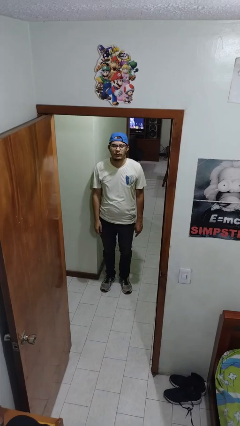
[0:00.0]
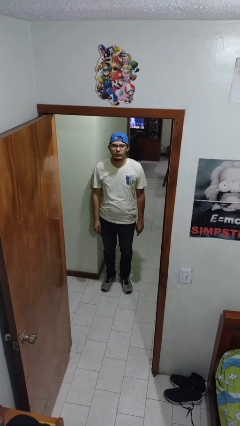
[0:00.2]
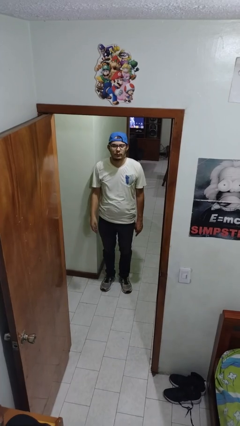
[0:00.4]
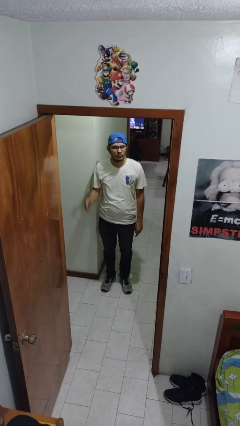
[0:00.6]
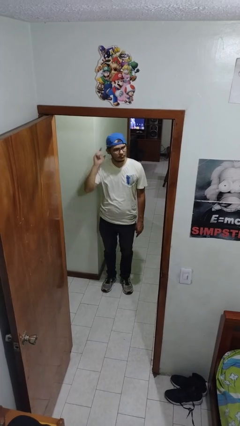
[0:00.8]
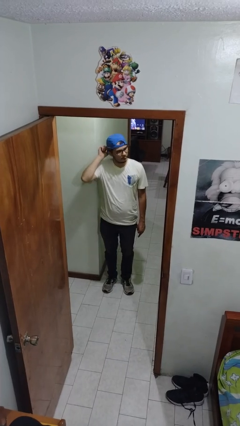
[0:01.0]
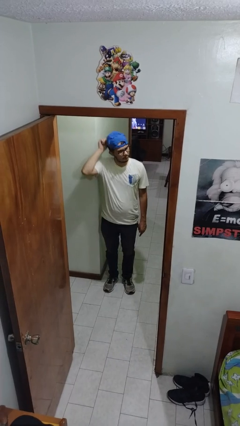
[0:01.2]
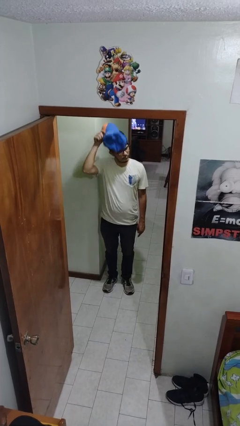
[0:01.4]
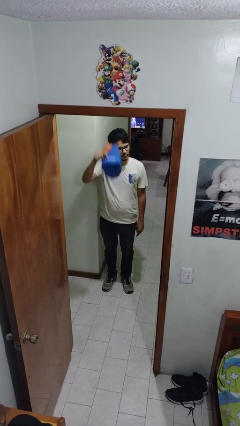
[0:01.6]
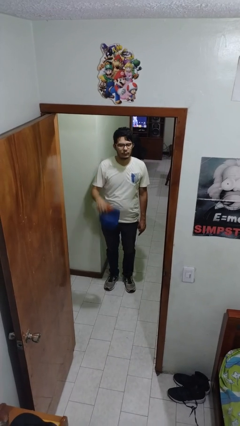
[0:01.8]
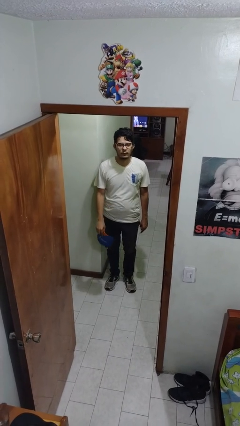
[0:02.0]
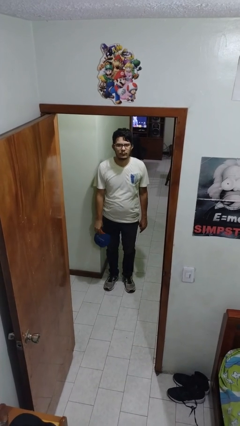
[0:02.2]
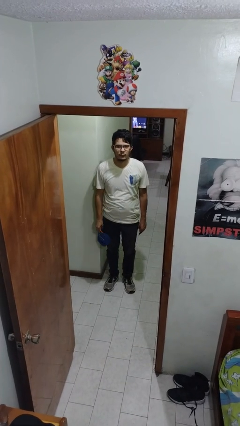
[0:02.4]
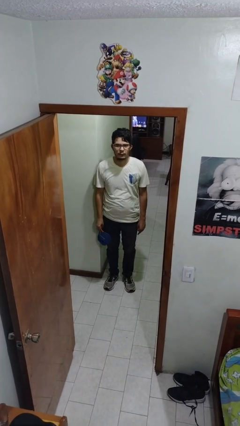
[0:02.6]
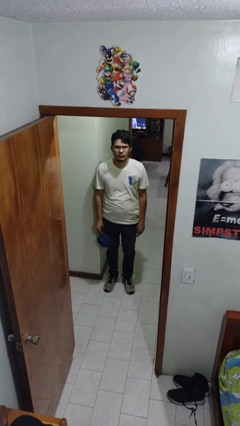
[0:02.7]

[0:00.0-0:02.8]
person takes off hat

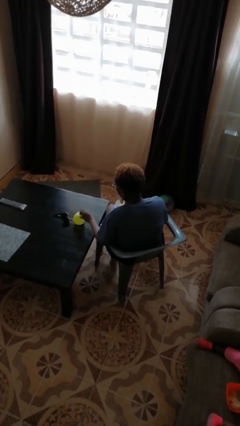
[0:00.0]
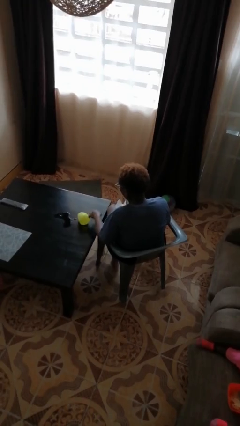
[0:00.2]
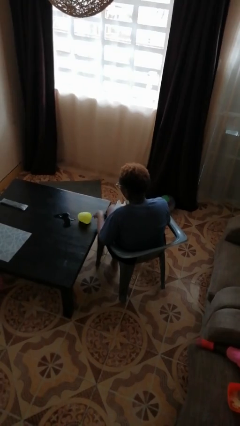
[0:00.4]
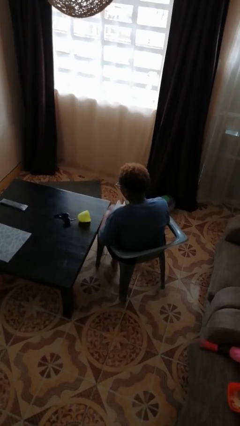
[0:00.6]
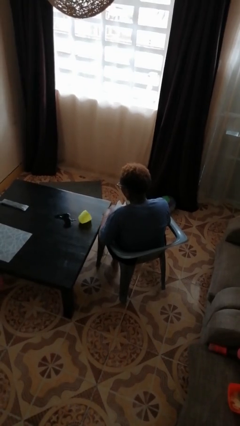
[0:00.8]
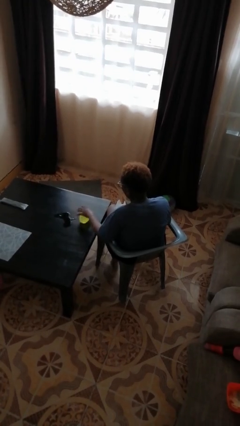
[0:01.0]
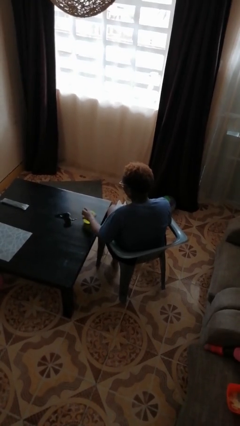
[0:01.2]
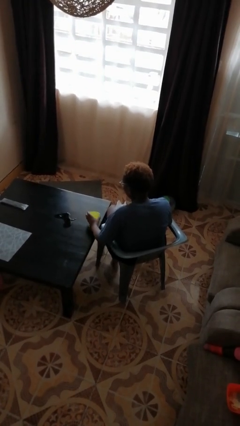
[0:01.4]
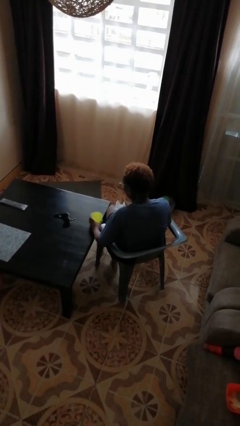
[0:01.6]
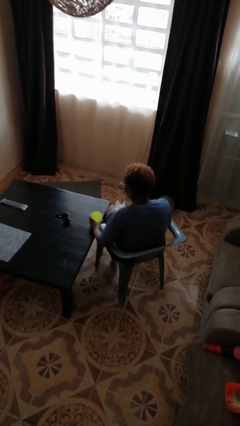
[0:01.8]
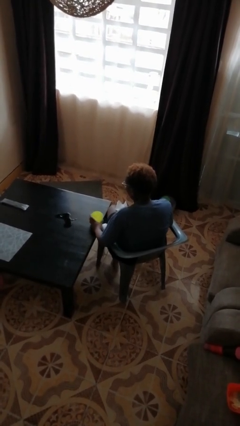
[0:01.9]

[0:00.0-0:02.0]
person sets upright glass

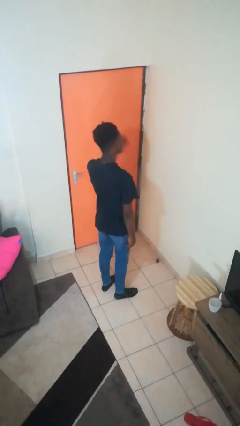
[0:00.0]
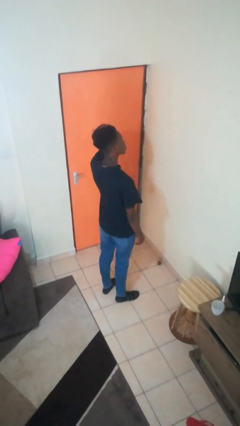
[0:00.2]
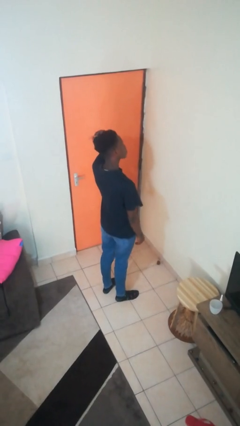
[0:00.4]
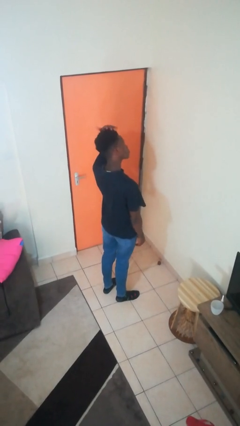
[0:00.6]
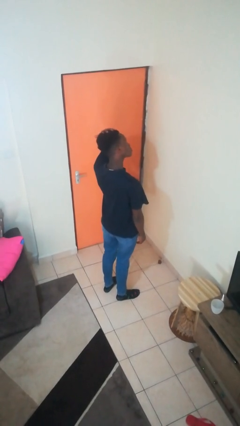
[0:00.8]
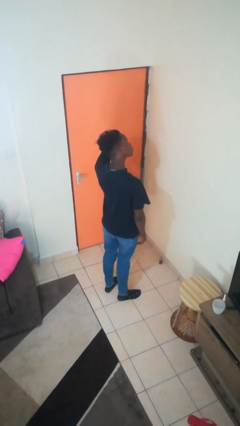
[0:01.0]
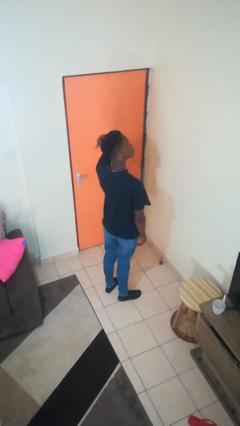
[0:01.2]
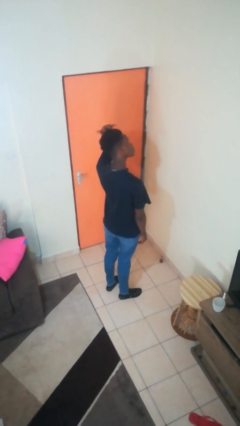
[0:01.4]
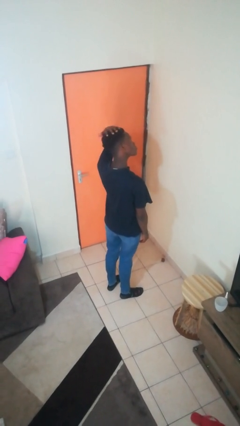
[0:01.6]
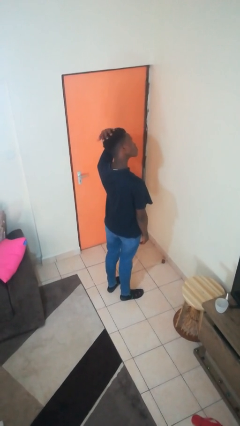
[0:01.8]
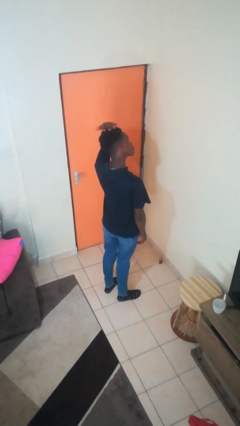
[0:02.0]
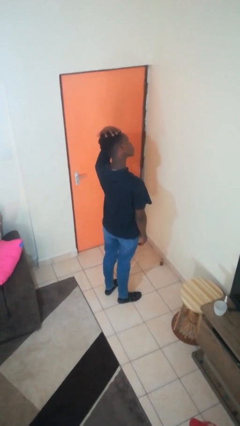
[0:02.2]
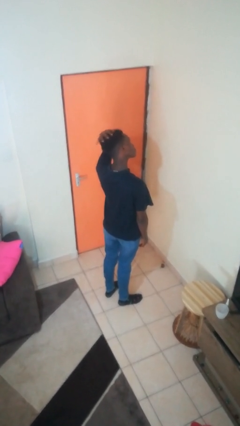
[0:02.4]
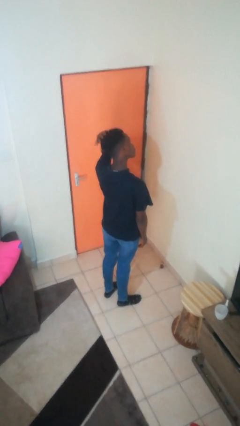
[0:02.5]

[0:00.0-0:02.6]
person strokes hair

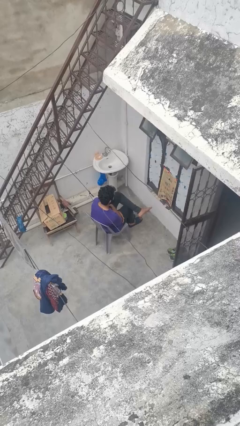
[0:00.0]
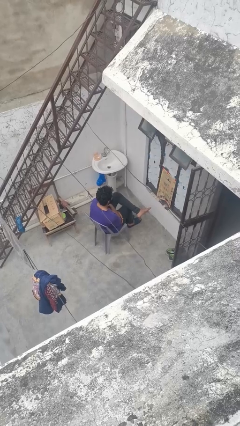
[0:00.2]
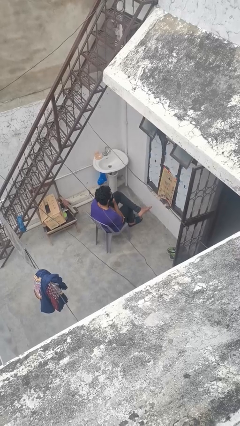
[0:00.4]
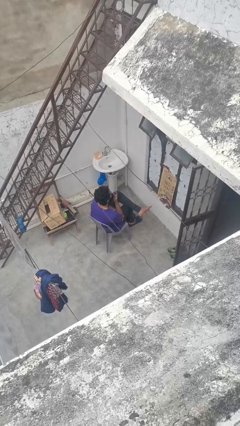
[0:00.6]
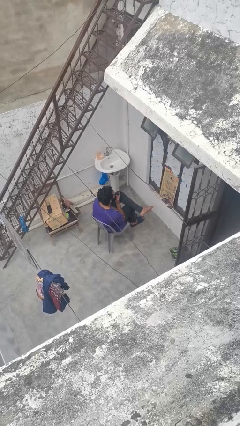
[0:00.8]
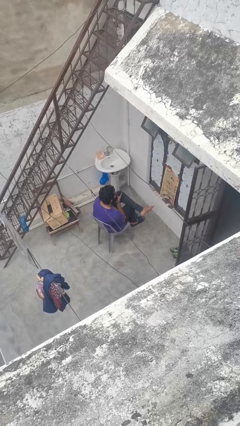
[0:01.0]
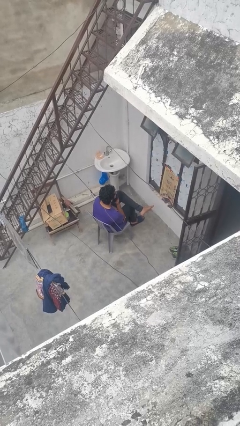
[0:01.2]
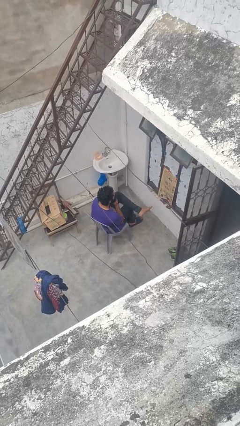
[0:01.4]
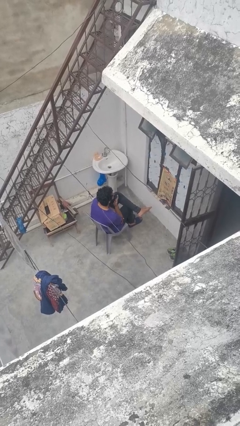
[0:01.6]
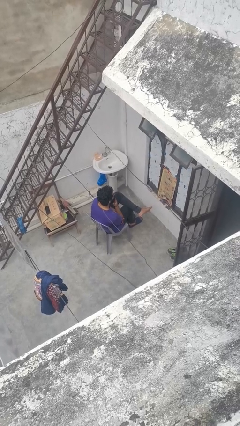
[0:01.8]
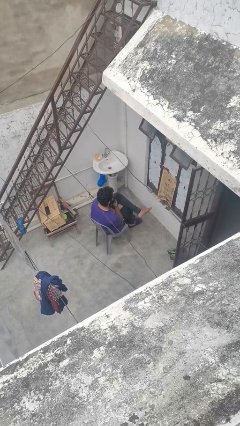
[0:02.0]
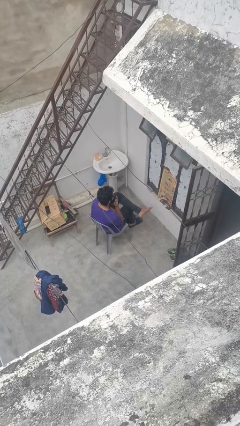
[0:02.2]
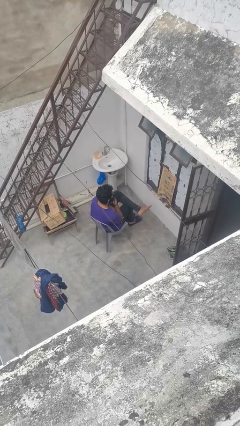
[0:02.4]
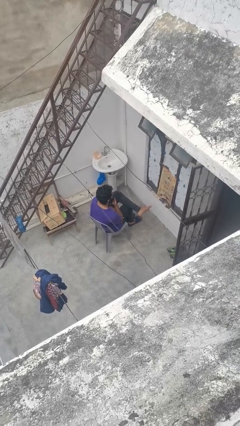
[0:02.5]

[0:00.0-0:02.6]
person strokes chin

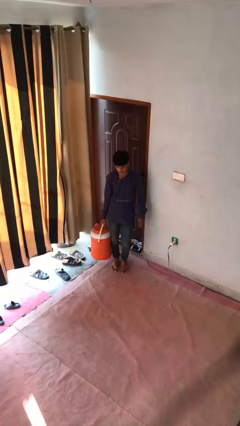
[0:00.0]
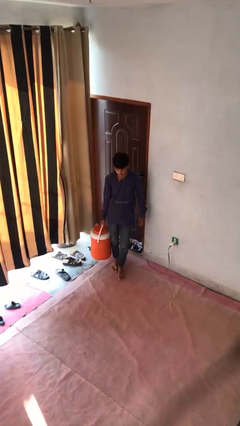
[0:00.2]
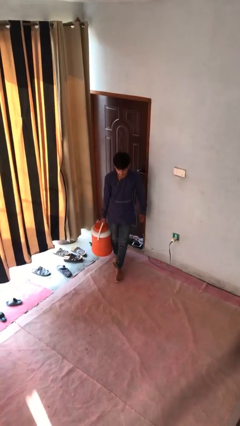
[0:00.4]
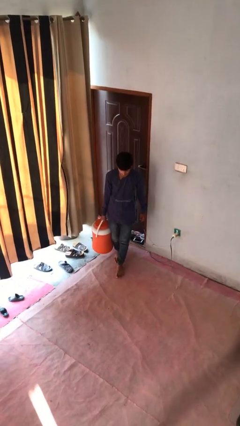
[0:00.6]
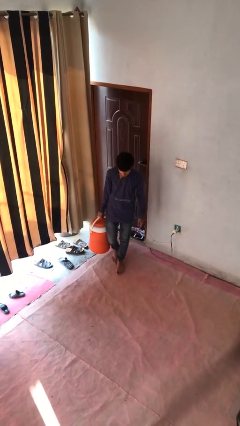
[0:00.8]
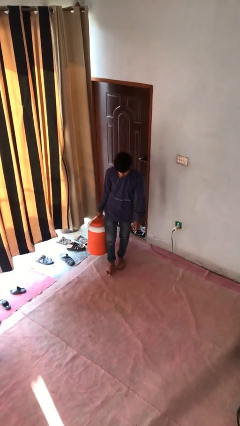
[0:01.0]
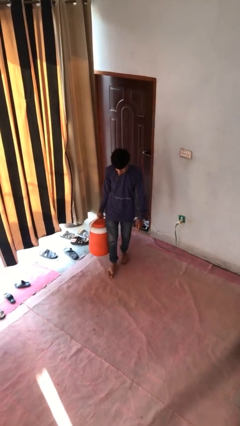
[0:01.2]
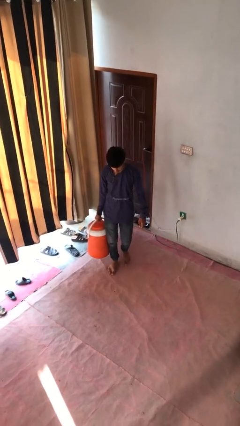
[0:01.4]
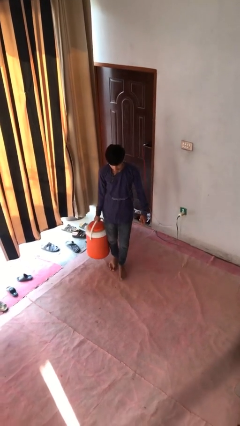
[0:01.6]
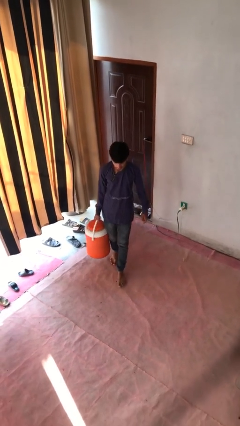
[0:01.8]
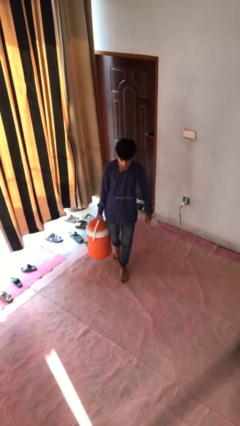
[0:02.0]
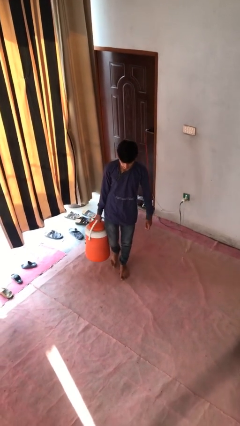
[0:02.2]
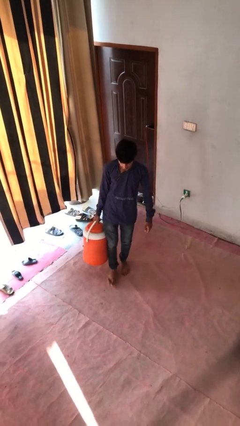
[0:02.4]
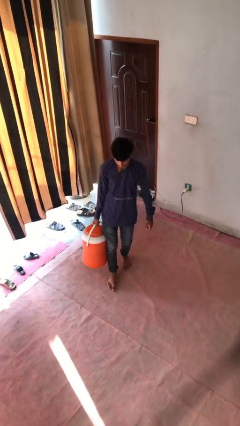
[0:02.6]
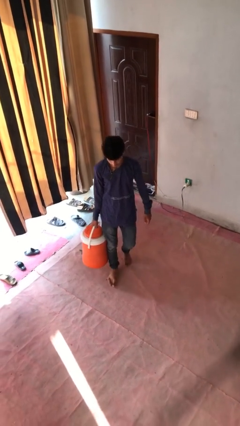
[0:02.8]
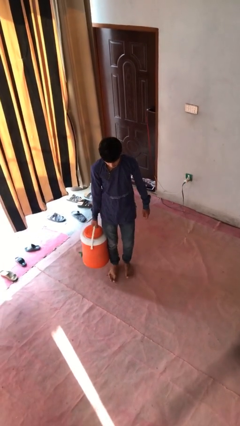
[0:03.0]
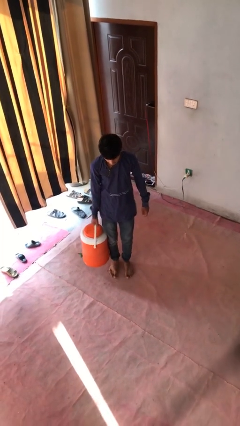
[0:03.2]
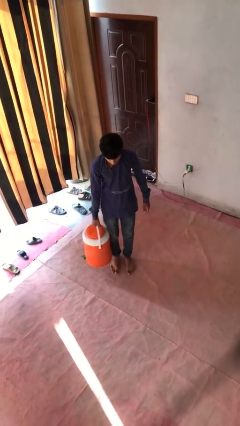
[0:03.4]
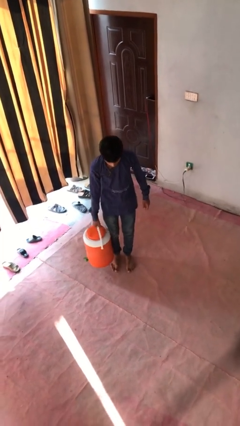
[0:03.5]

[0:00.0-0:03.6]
person carries heavy object

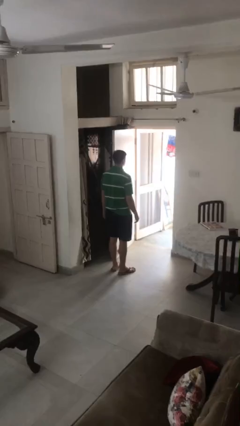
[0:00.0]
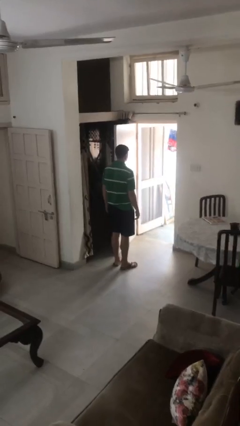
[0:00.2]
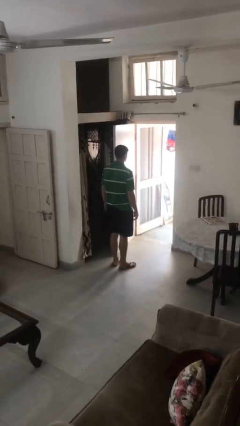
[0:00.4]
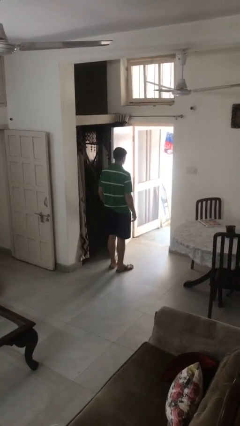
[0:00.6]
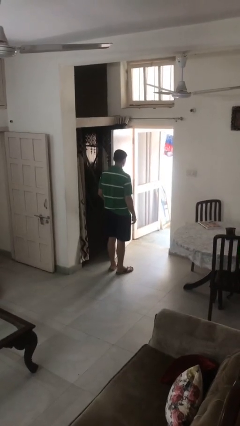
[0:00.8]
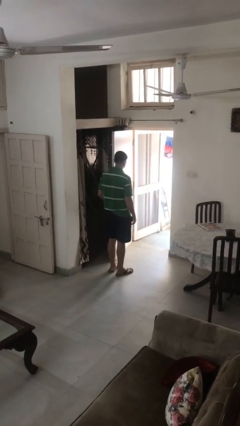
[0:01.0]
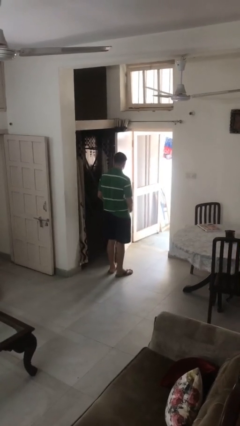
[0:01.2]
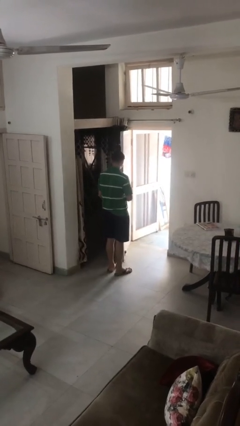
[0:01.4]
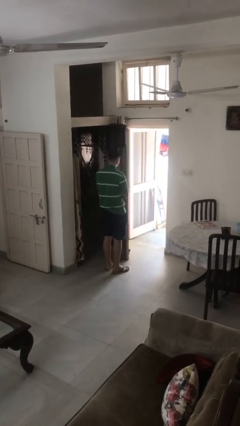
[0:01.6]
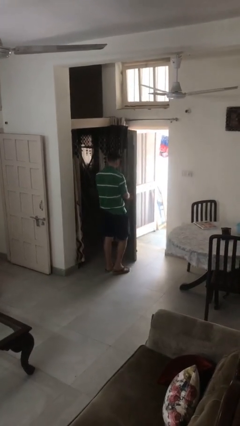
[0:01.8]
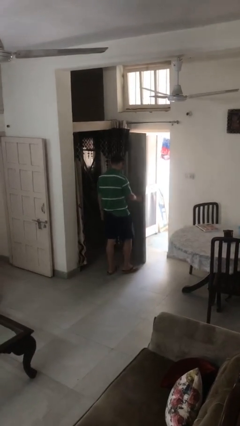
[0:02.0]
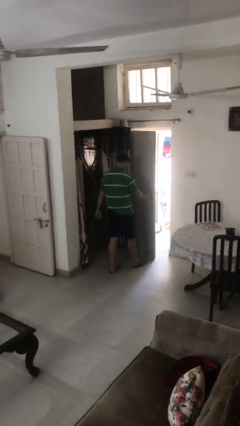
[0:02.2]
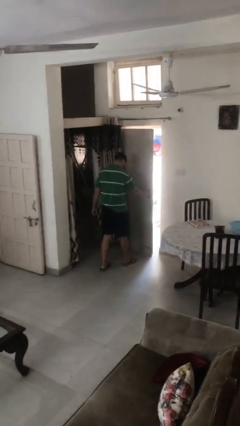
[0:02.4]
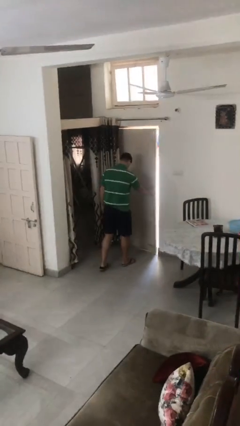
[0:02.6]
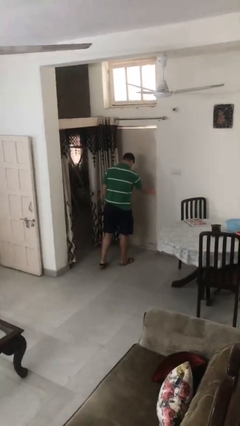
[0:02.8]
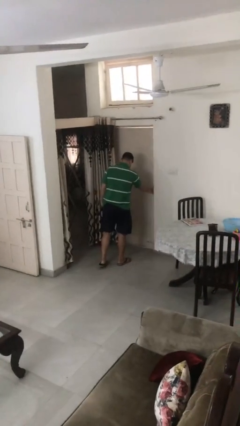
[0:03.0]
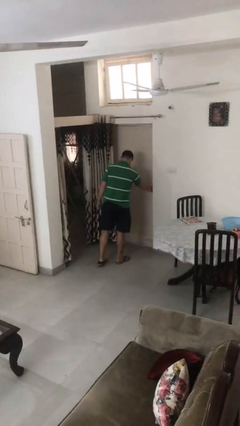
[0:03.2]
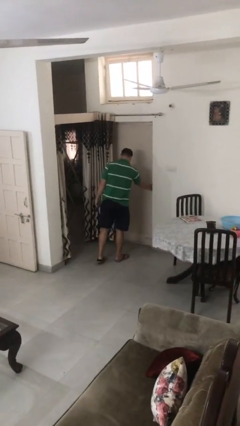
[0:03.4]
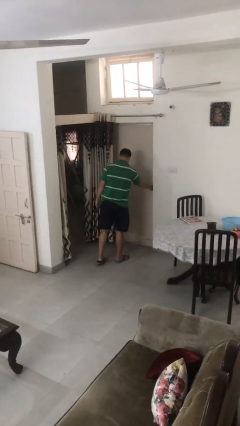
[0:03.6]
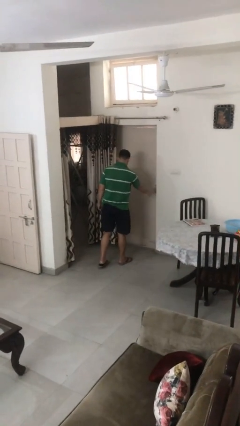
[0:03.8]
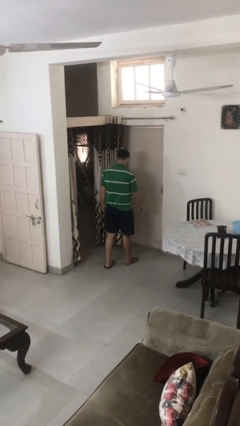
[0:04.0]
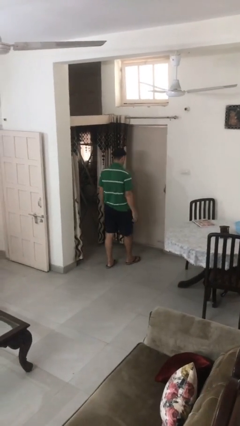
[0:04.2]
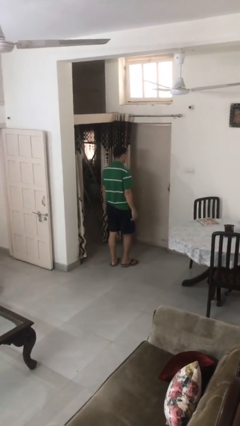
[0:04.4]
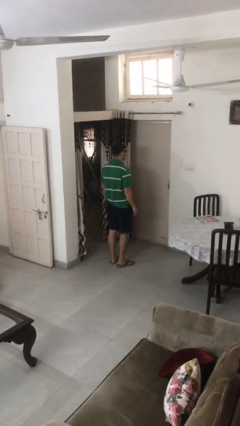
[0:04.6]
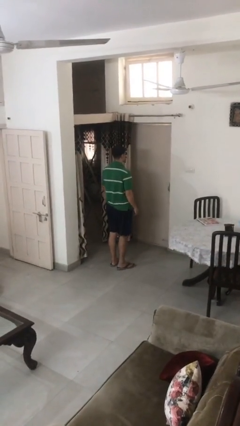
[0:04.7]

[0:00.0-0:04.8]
person closes facility door
